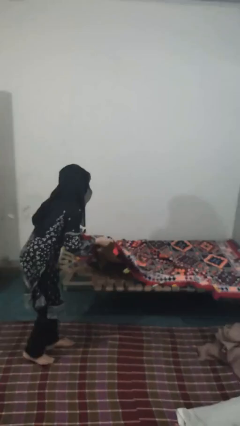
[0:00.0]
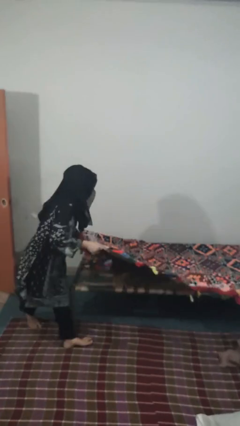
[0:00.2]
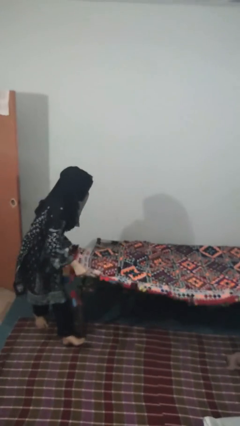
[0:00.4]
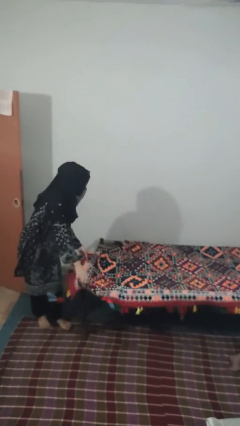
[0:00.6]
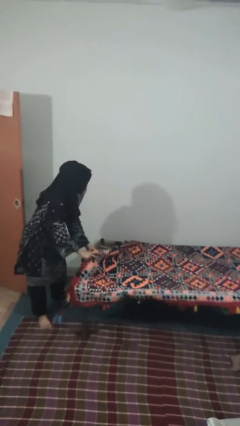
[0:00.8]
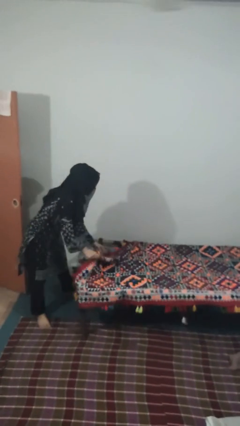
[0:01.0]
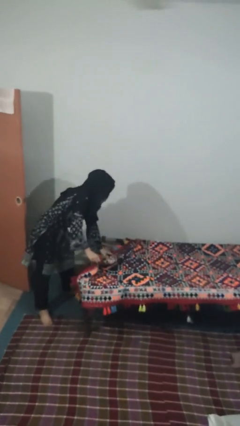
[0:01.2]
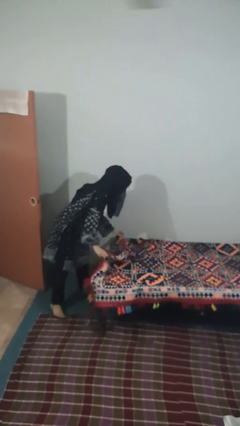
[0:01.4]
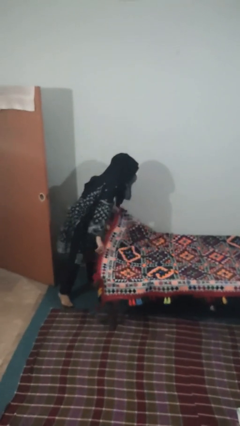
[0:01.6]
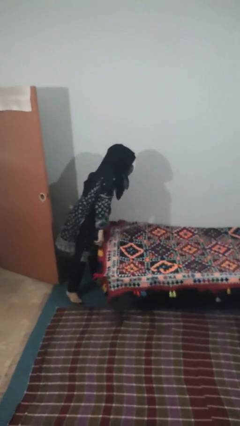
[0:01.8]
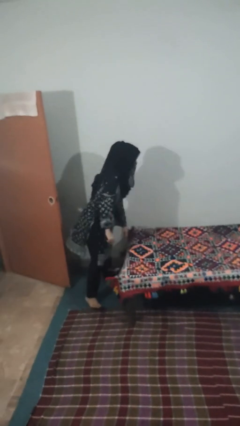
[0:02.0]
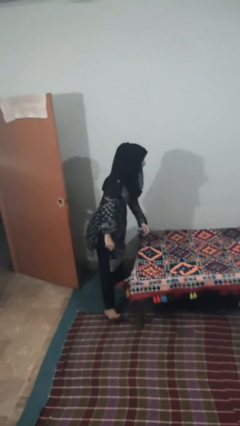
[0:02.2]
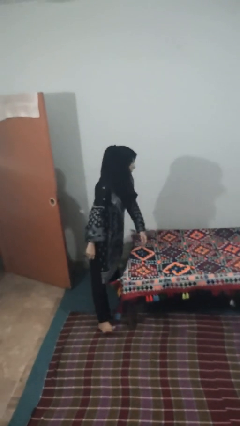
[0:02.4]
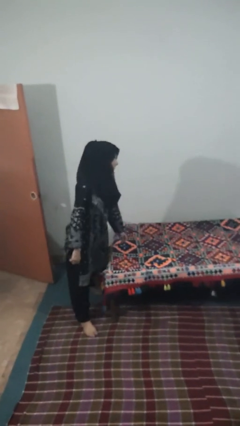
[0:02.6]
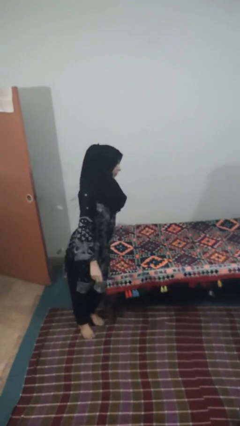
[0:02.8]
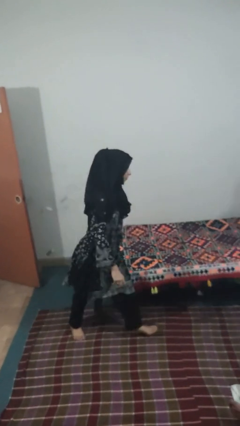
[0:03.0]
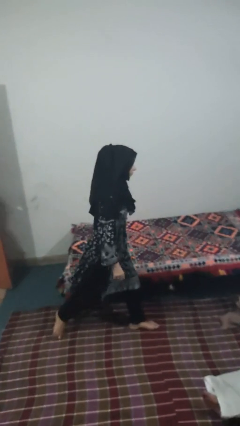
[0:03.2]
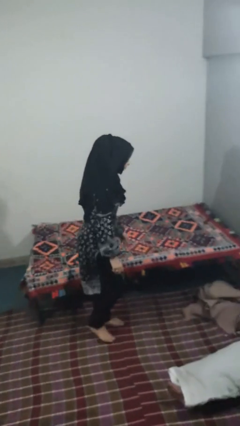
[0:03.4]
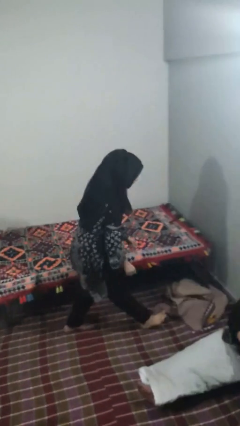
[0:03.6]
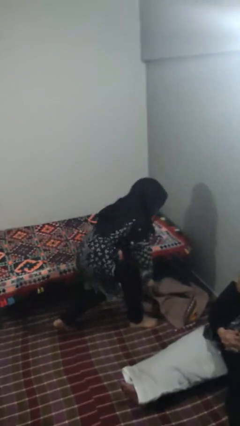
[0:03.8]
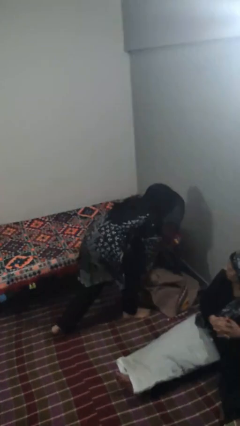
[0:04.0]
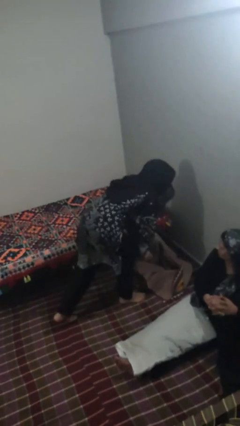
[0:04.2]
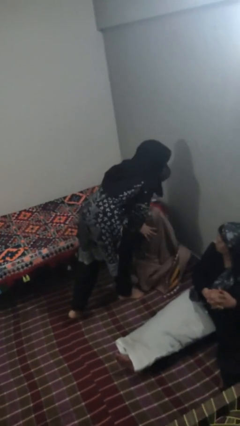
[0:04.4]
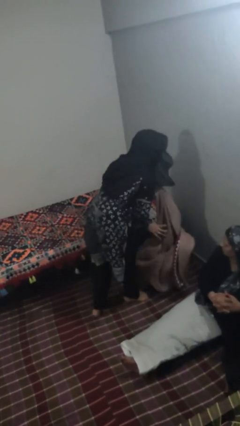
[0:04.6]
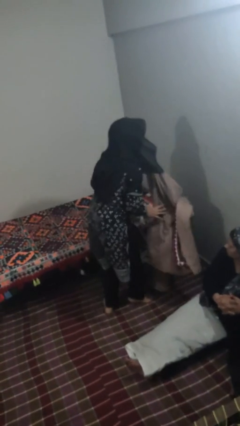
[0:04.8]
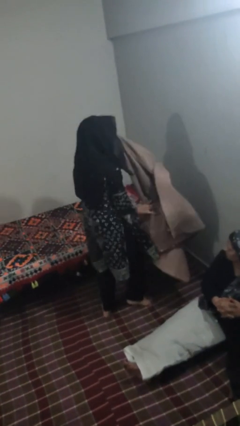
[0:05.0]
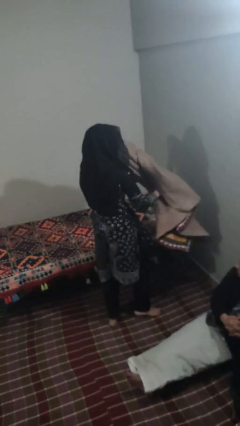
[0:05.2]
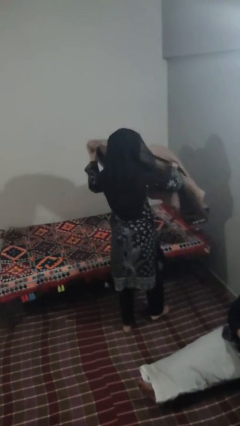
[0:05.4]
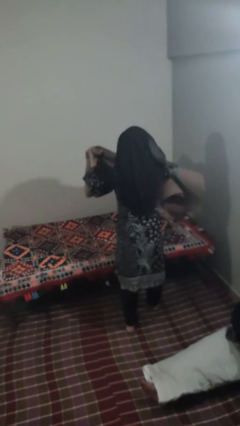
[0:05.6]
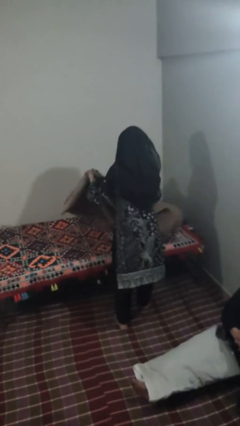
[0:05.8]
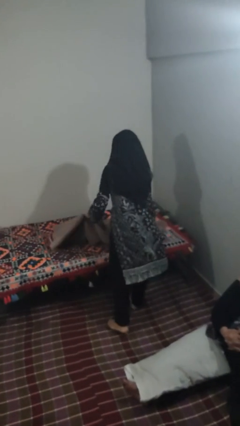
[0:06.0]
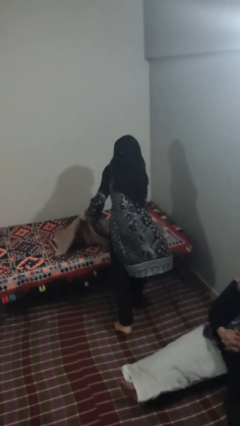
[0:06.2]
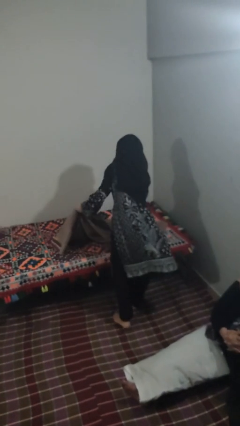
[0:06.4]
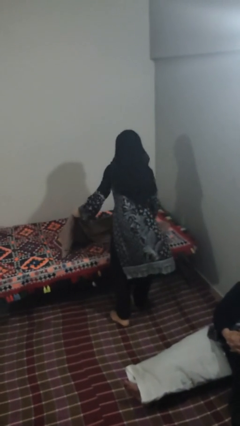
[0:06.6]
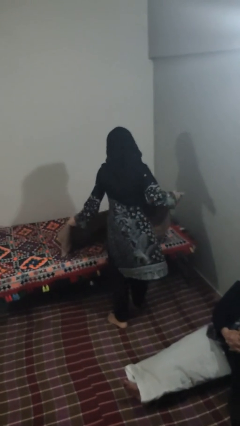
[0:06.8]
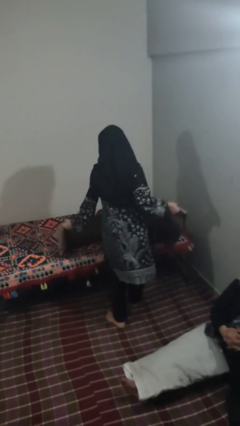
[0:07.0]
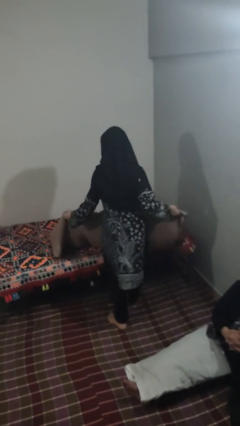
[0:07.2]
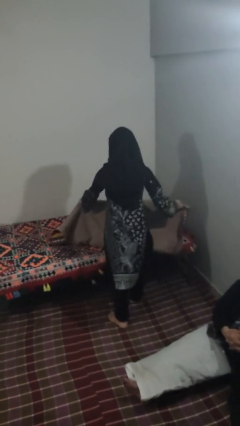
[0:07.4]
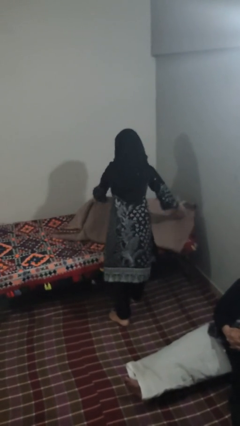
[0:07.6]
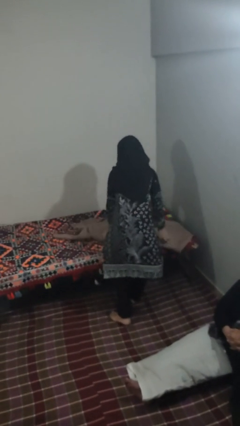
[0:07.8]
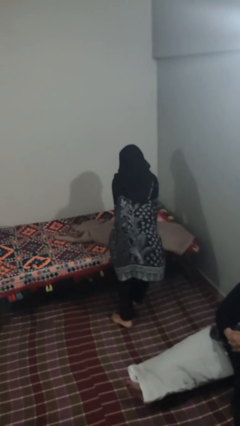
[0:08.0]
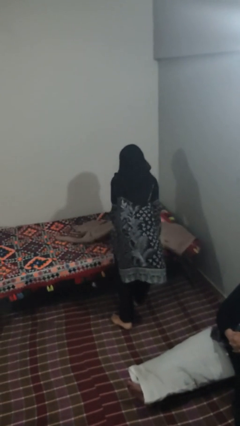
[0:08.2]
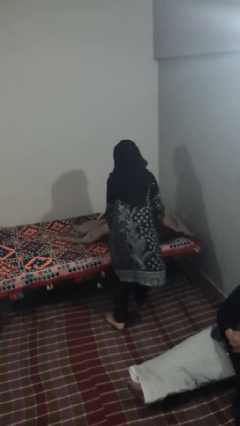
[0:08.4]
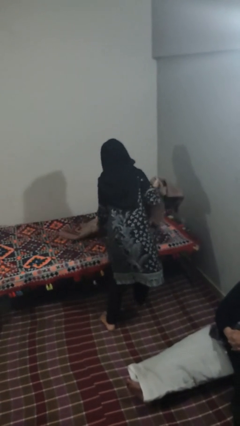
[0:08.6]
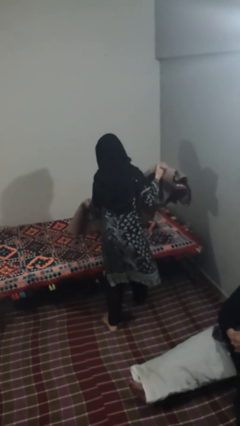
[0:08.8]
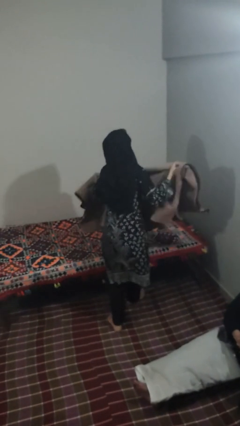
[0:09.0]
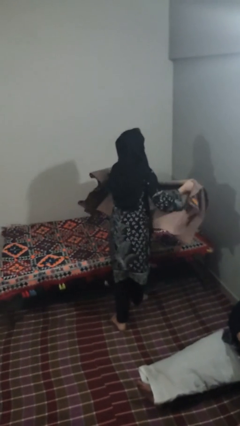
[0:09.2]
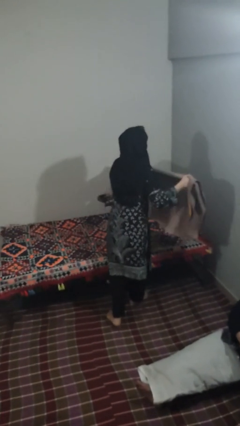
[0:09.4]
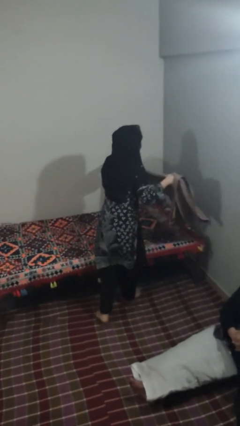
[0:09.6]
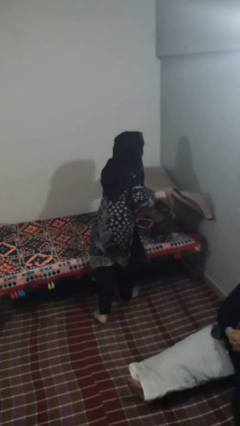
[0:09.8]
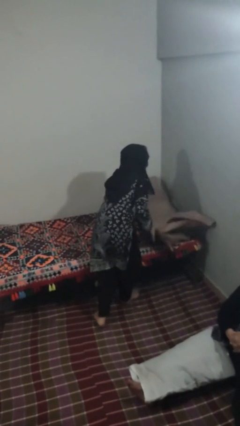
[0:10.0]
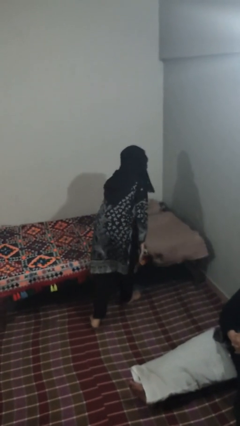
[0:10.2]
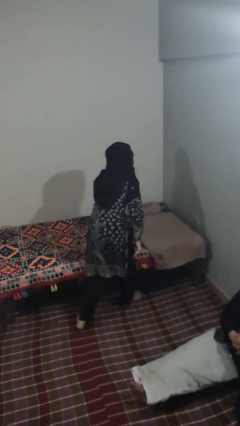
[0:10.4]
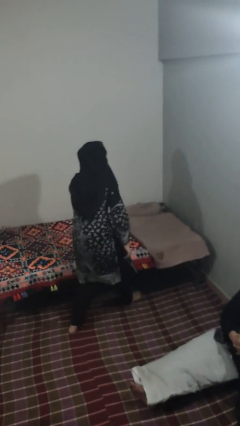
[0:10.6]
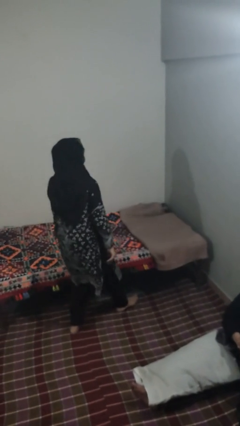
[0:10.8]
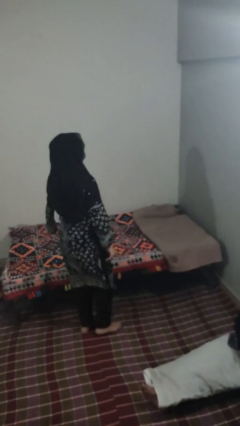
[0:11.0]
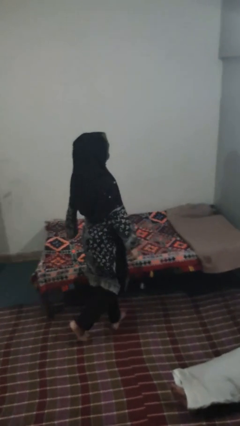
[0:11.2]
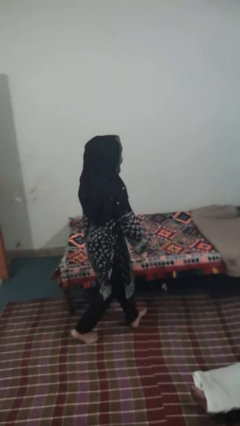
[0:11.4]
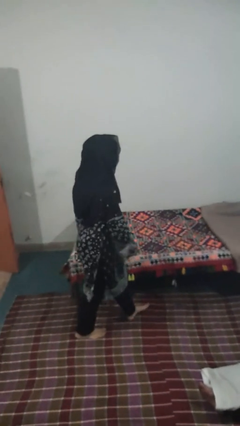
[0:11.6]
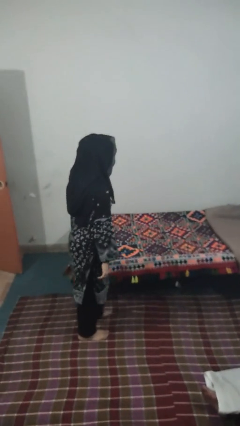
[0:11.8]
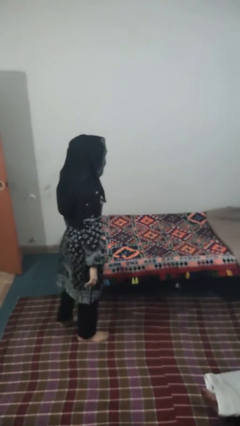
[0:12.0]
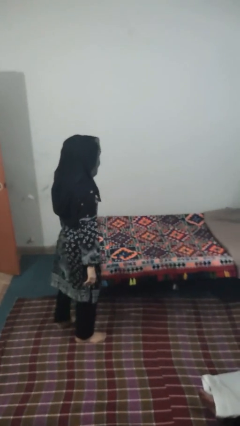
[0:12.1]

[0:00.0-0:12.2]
person makes bed

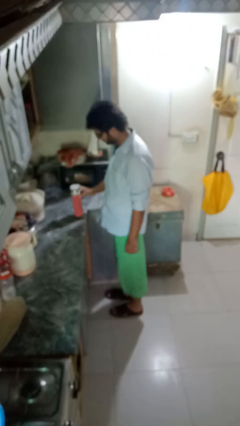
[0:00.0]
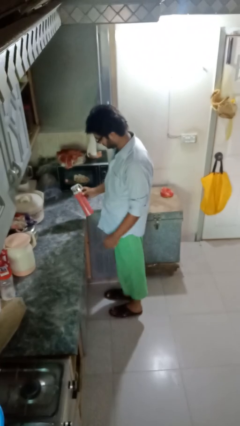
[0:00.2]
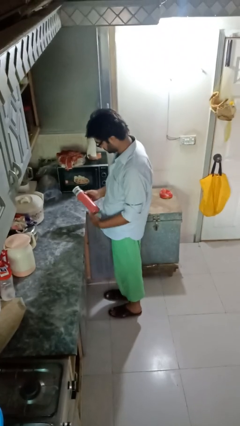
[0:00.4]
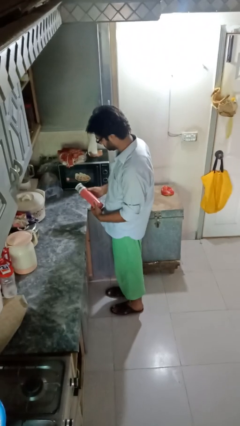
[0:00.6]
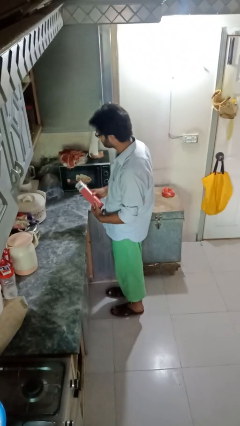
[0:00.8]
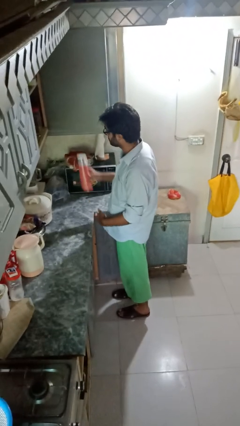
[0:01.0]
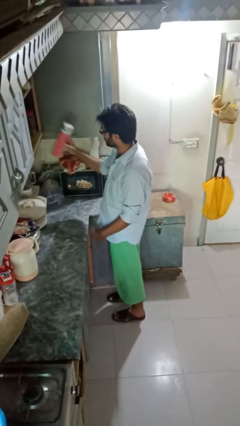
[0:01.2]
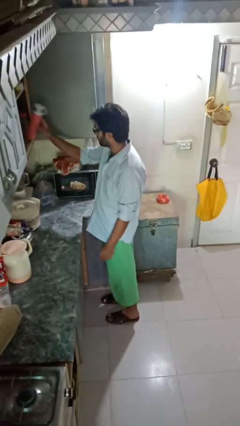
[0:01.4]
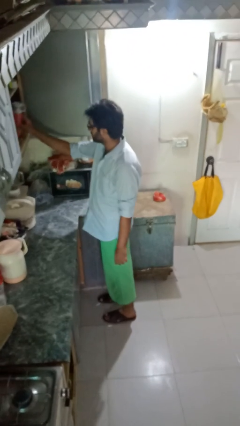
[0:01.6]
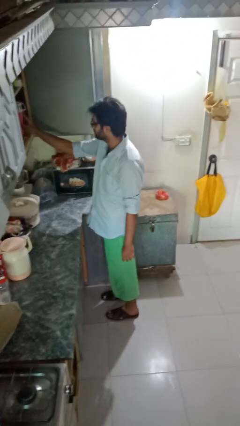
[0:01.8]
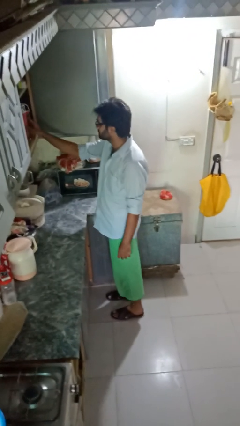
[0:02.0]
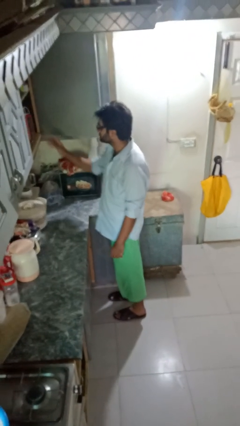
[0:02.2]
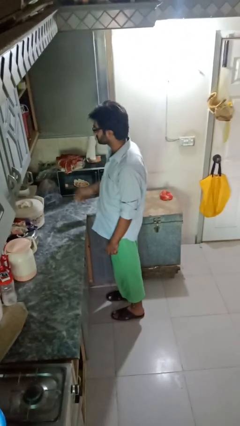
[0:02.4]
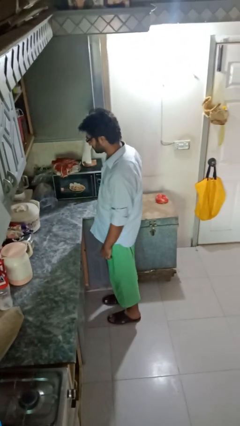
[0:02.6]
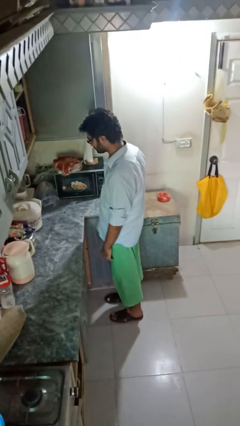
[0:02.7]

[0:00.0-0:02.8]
person puts down object into cabinet

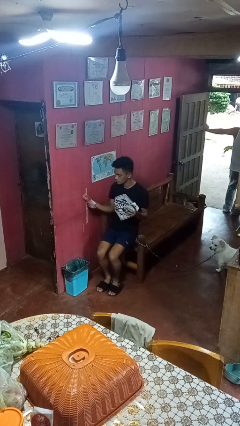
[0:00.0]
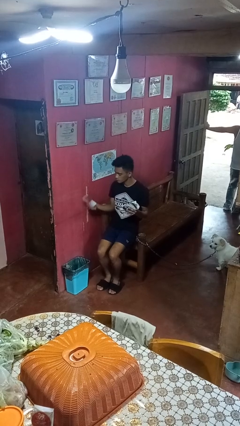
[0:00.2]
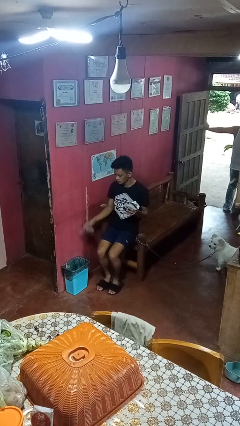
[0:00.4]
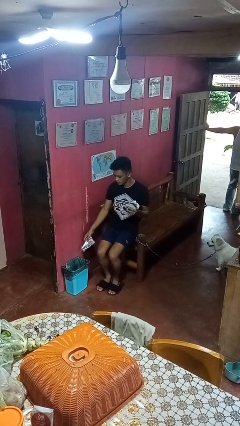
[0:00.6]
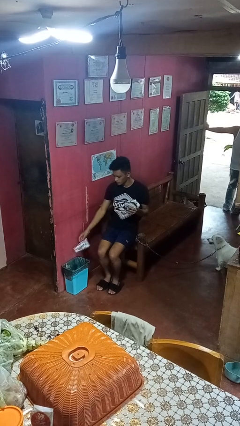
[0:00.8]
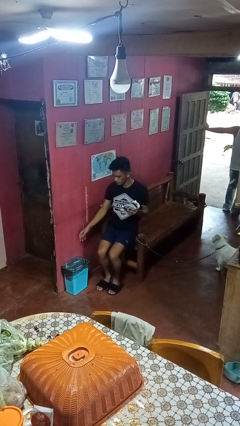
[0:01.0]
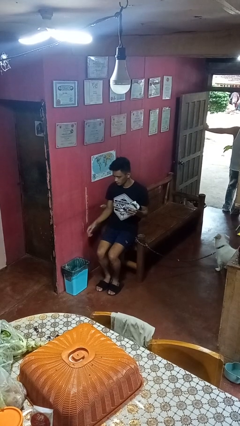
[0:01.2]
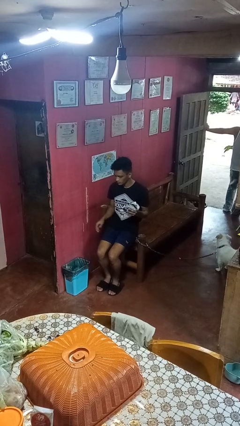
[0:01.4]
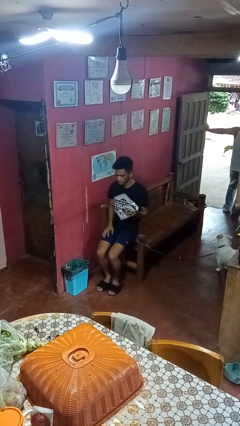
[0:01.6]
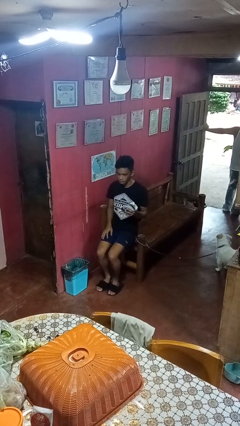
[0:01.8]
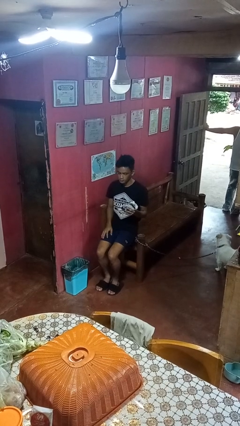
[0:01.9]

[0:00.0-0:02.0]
person discards trash

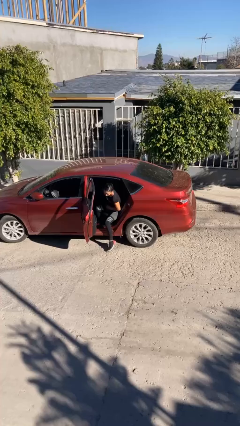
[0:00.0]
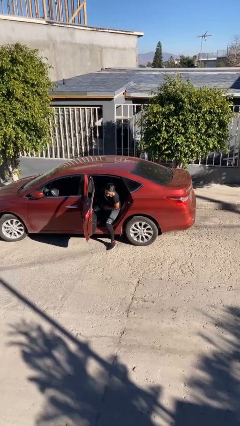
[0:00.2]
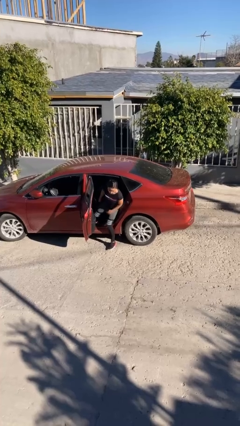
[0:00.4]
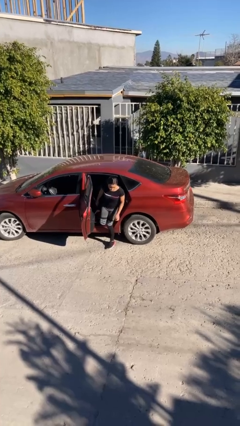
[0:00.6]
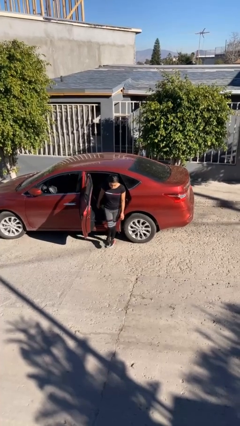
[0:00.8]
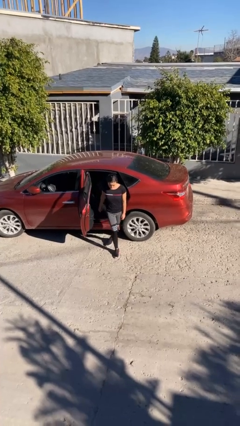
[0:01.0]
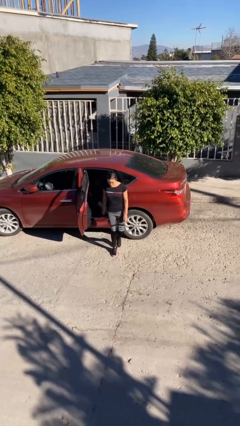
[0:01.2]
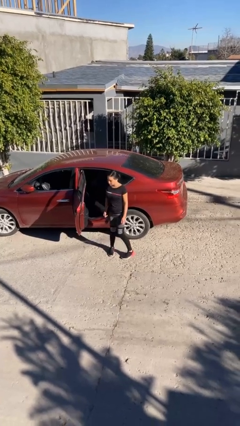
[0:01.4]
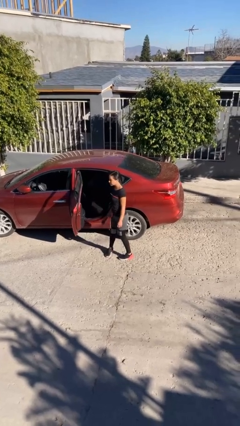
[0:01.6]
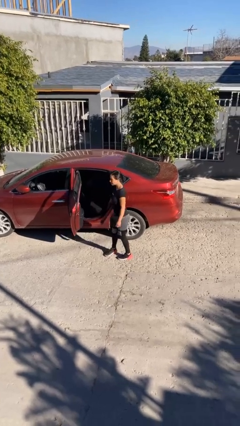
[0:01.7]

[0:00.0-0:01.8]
person exits car
